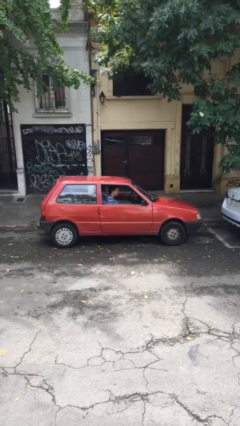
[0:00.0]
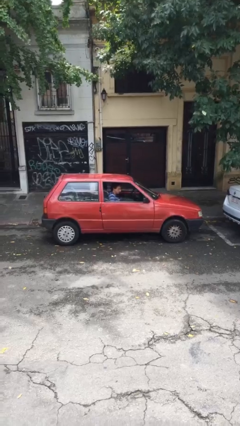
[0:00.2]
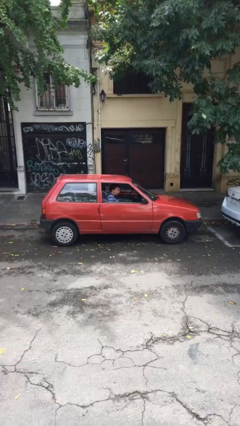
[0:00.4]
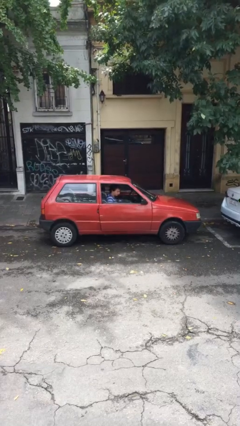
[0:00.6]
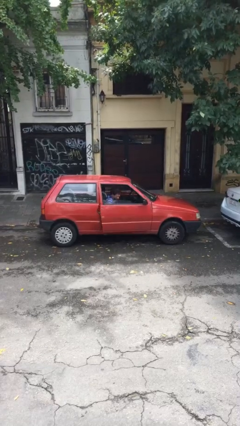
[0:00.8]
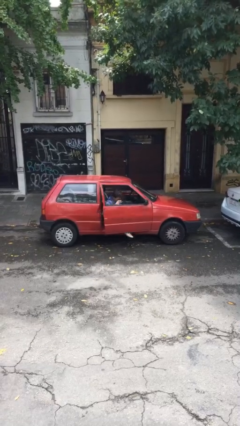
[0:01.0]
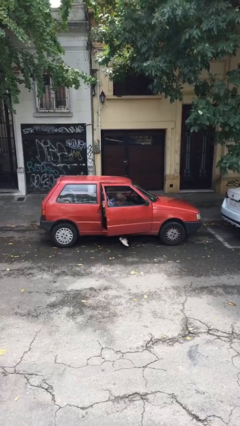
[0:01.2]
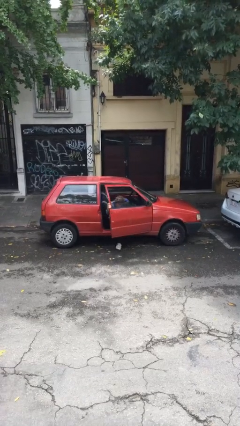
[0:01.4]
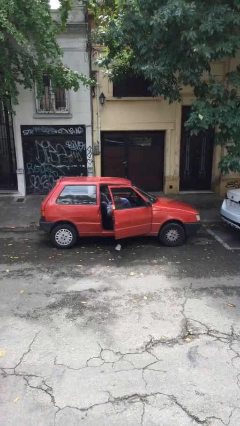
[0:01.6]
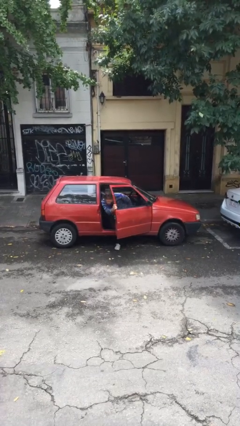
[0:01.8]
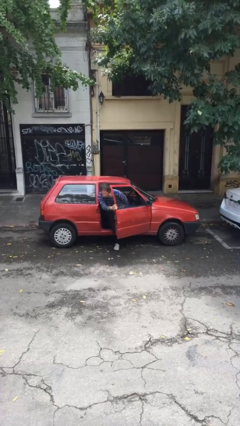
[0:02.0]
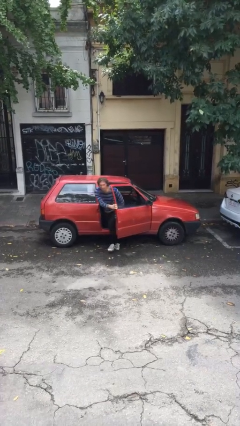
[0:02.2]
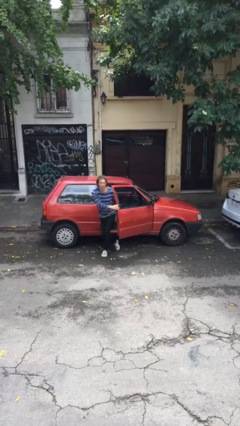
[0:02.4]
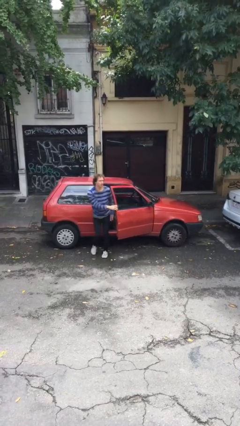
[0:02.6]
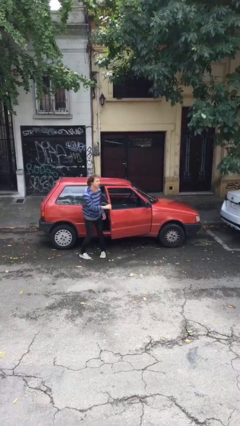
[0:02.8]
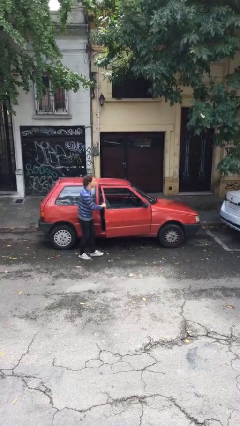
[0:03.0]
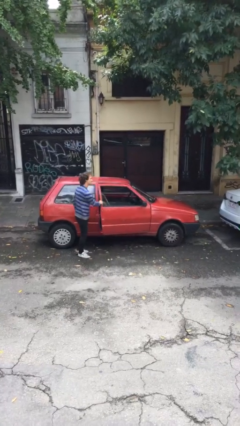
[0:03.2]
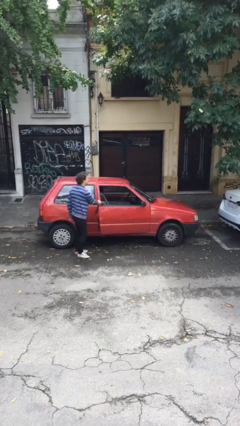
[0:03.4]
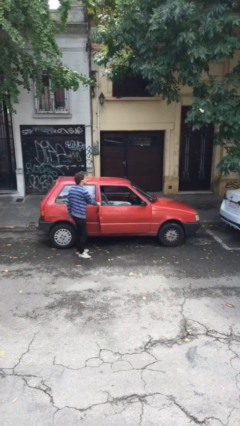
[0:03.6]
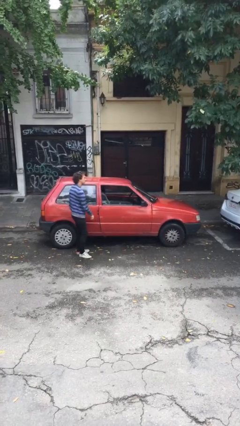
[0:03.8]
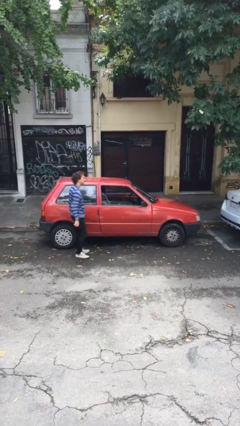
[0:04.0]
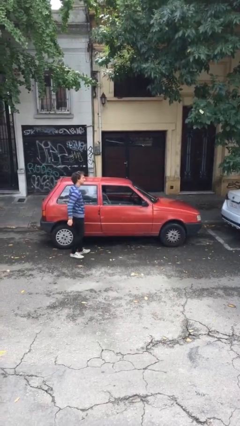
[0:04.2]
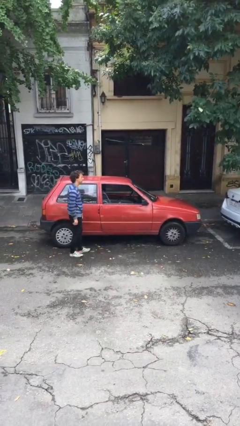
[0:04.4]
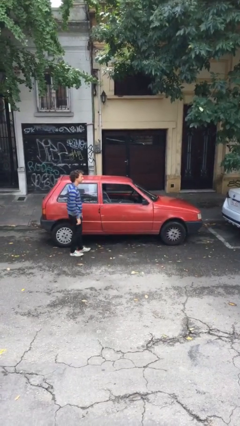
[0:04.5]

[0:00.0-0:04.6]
car drops off person

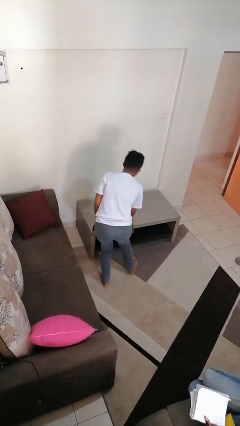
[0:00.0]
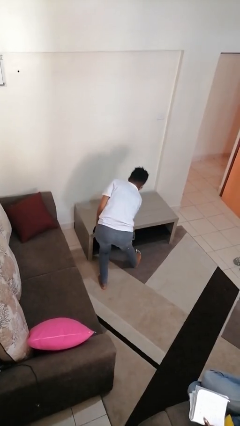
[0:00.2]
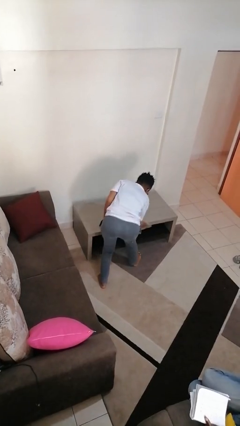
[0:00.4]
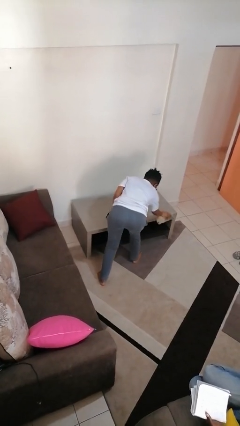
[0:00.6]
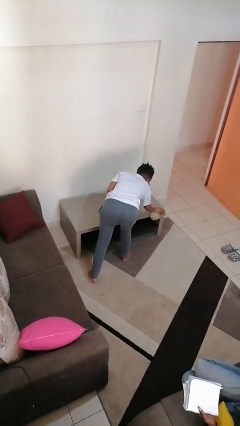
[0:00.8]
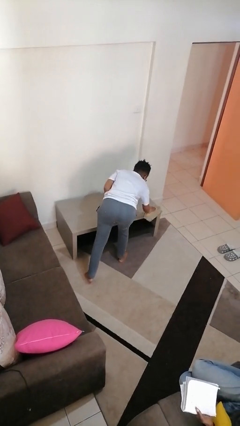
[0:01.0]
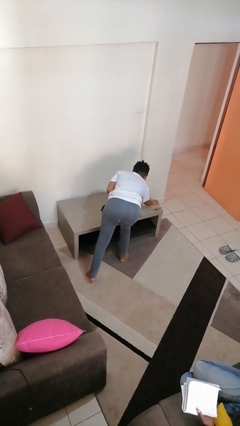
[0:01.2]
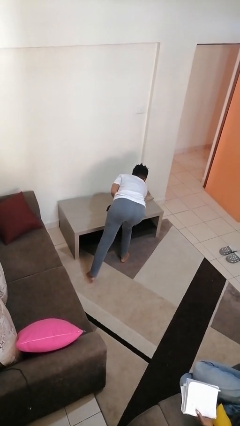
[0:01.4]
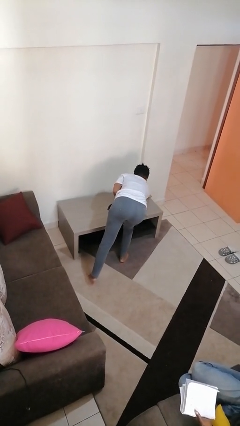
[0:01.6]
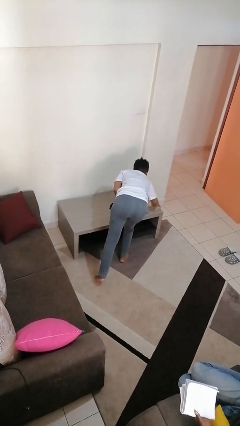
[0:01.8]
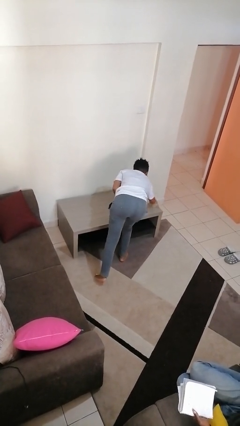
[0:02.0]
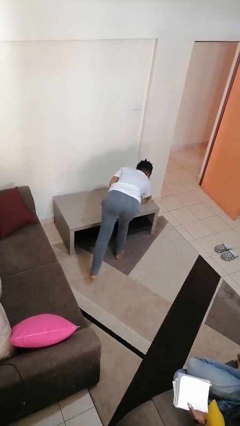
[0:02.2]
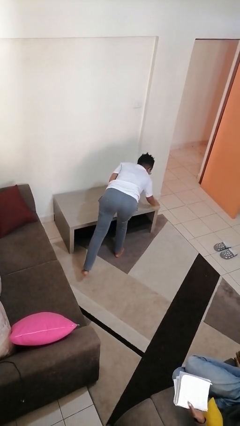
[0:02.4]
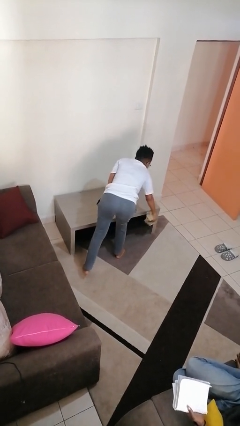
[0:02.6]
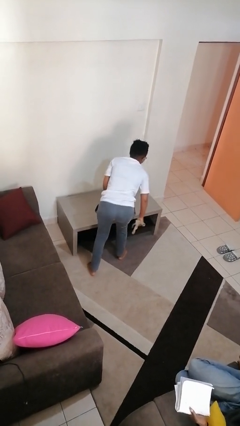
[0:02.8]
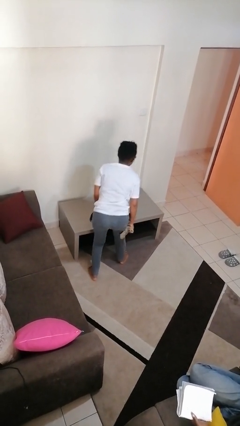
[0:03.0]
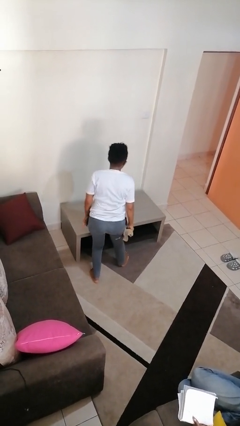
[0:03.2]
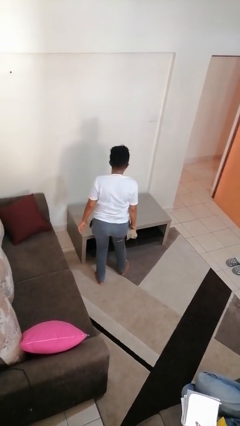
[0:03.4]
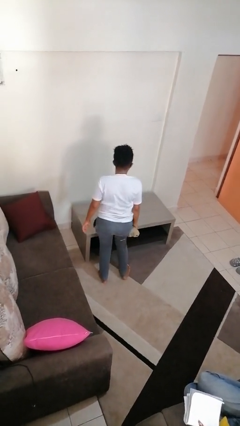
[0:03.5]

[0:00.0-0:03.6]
person cleans table with rag

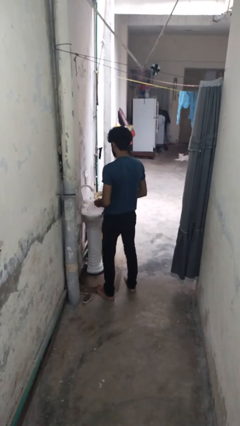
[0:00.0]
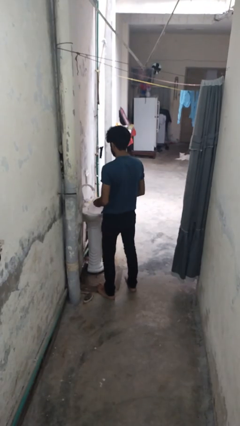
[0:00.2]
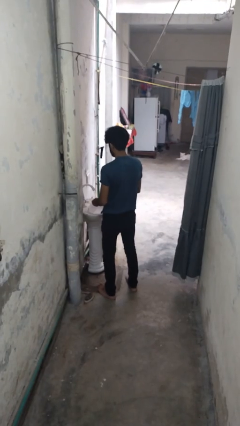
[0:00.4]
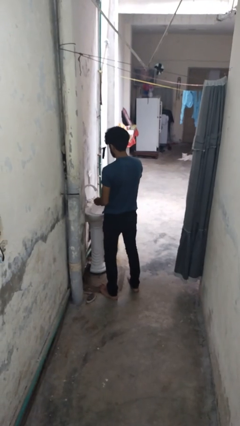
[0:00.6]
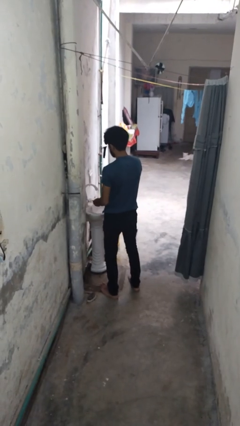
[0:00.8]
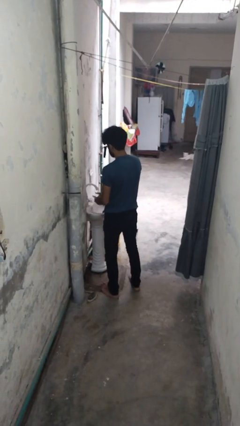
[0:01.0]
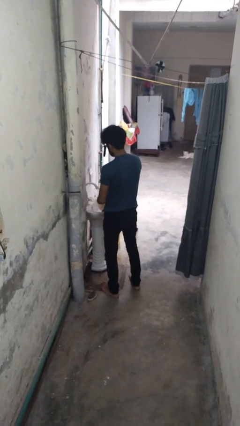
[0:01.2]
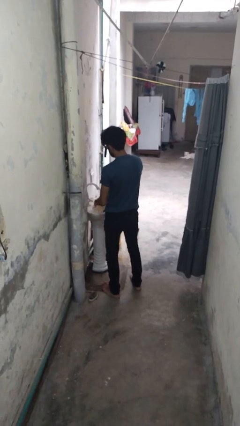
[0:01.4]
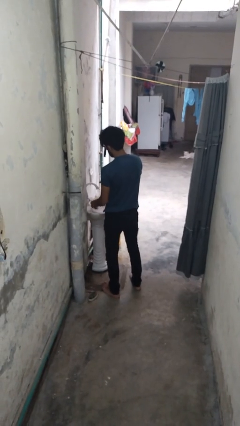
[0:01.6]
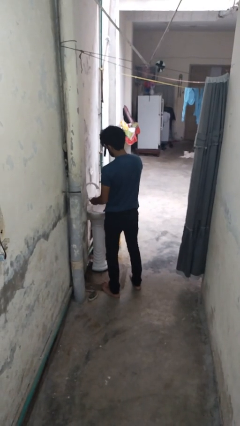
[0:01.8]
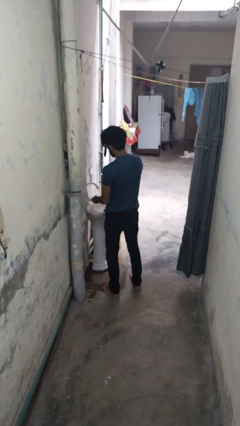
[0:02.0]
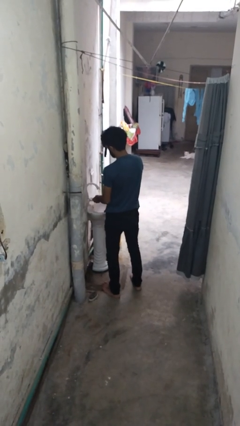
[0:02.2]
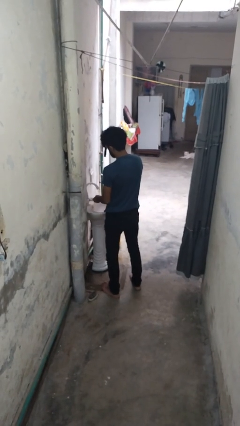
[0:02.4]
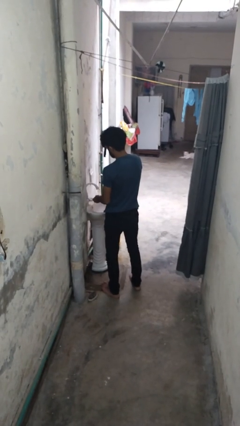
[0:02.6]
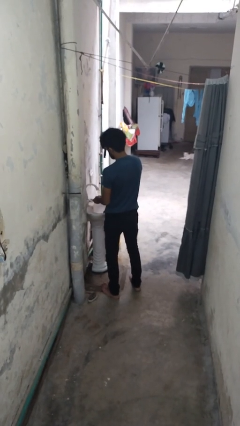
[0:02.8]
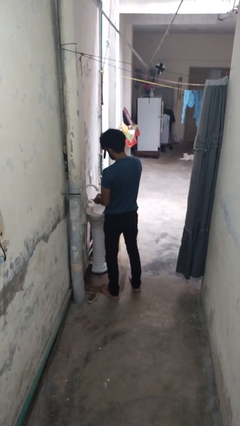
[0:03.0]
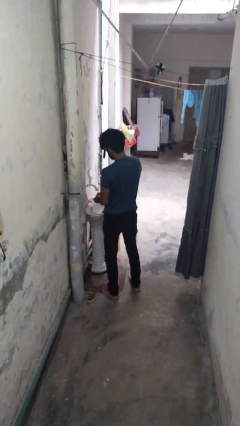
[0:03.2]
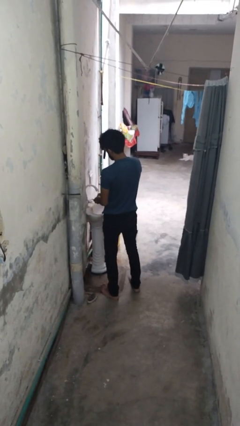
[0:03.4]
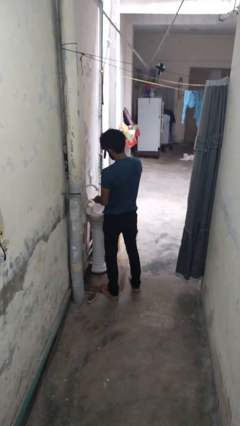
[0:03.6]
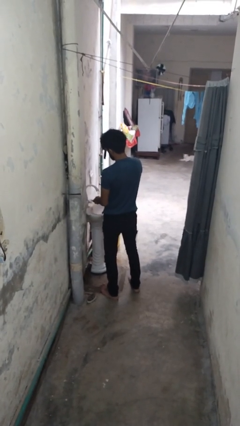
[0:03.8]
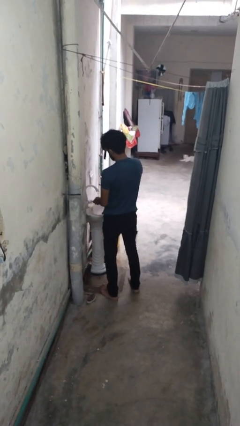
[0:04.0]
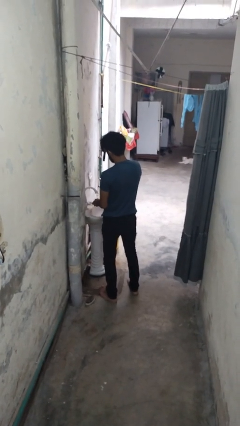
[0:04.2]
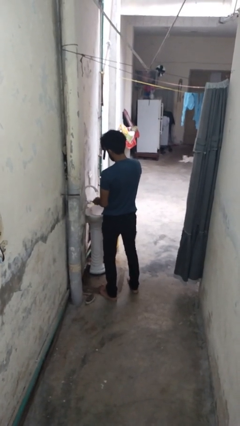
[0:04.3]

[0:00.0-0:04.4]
person washes dish

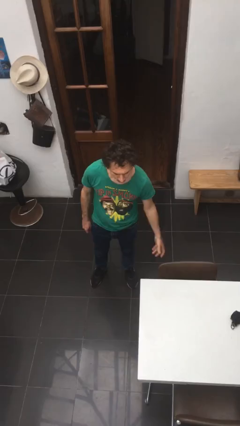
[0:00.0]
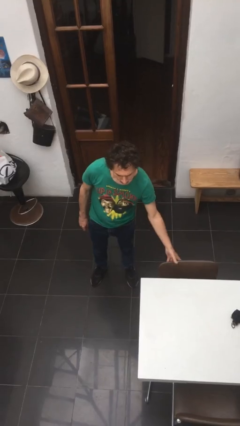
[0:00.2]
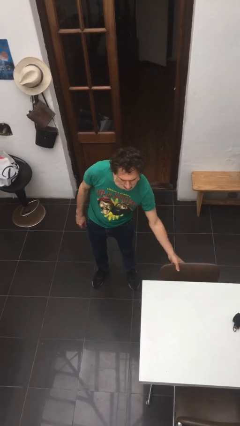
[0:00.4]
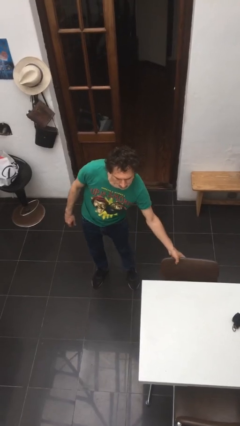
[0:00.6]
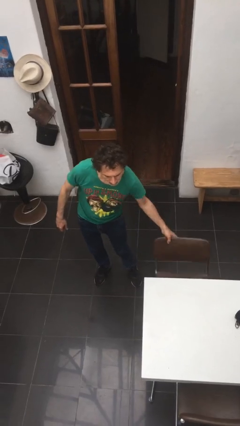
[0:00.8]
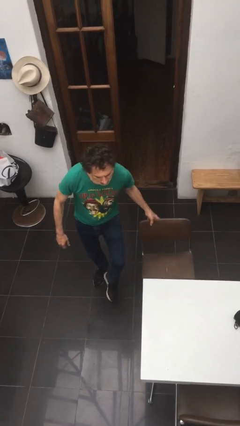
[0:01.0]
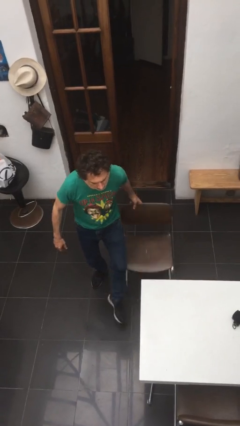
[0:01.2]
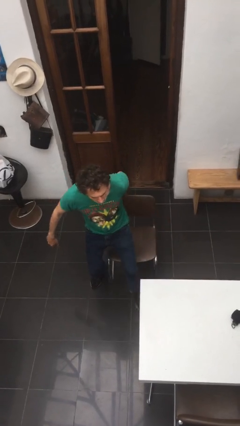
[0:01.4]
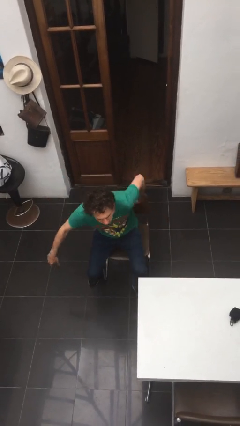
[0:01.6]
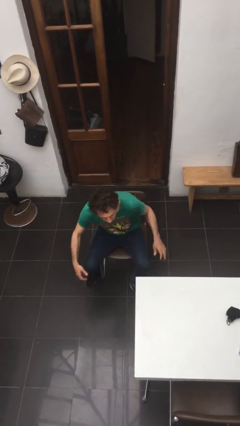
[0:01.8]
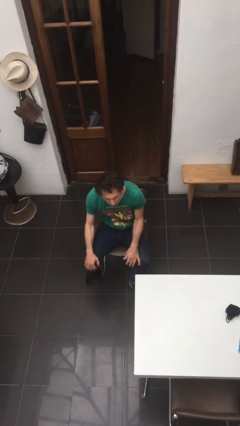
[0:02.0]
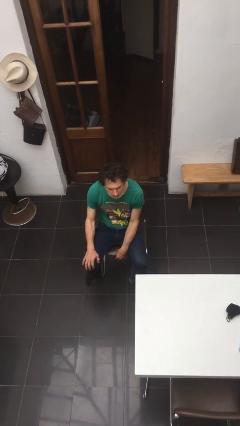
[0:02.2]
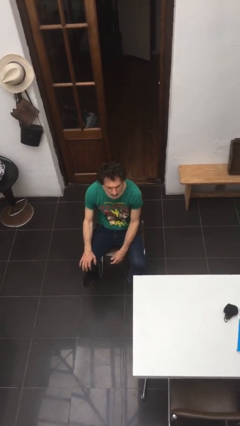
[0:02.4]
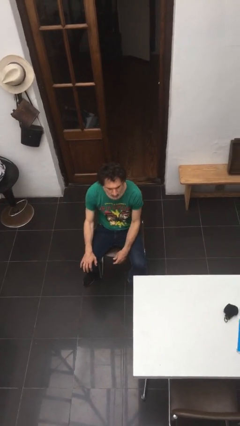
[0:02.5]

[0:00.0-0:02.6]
person sits down

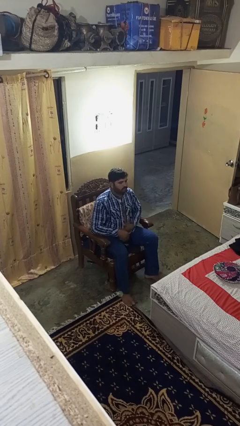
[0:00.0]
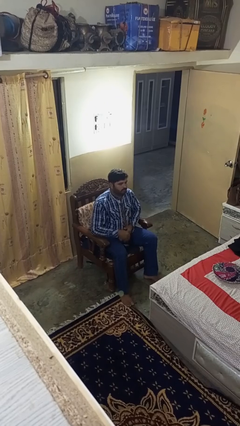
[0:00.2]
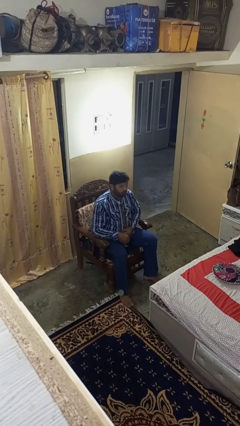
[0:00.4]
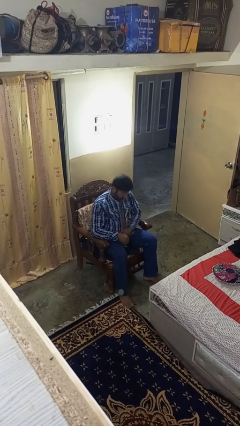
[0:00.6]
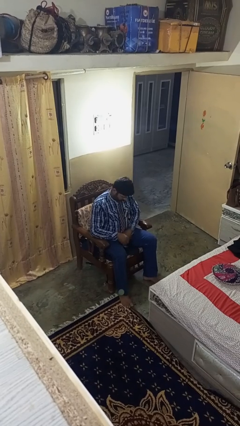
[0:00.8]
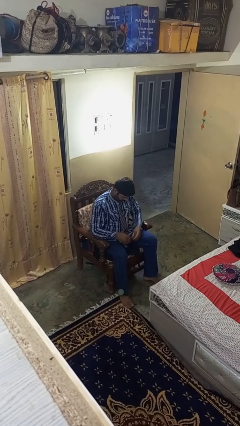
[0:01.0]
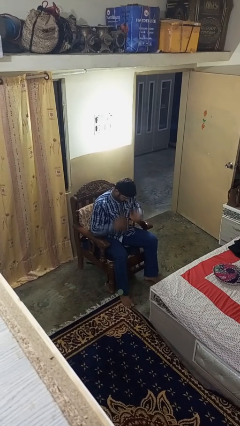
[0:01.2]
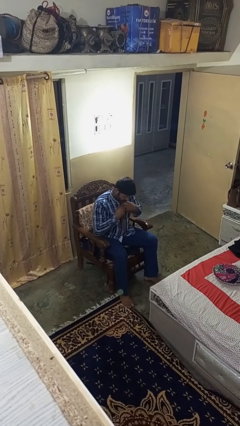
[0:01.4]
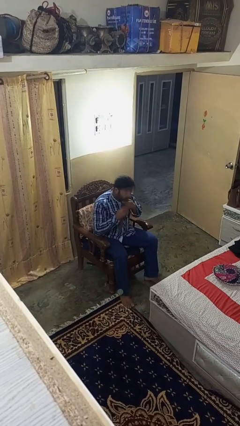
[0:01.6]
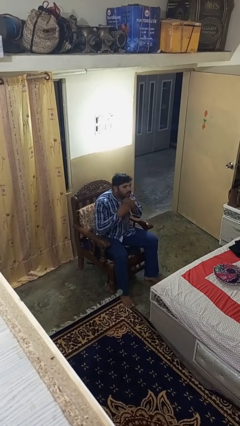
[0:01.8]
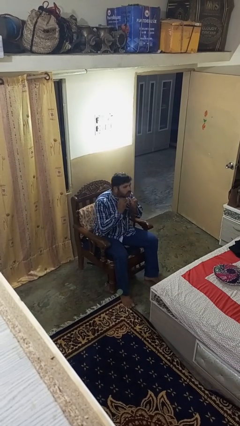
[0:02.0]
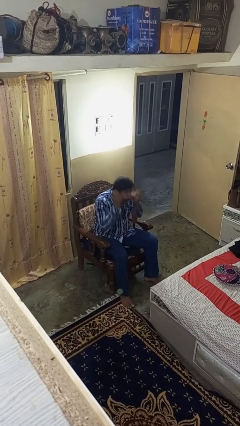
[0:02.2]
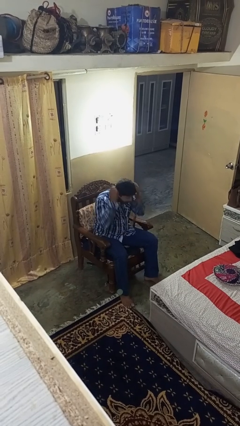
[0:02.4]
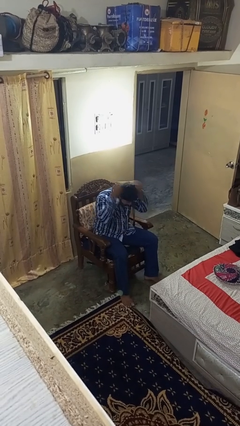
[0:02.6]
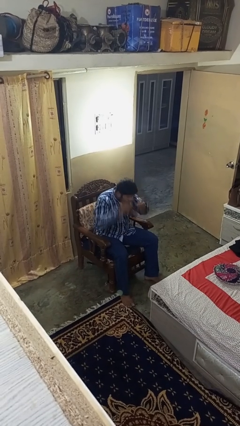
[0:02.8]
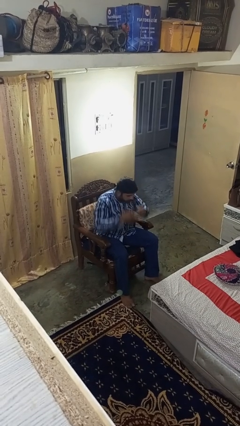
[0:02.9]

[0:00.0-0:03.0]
person takes off necktie
